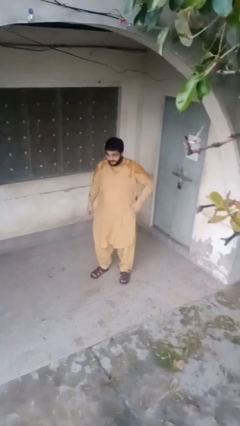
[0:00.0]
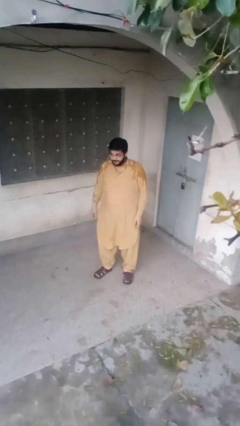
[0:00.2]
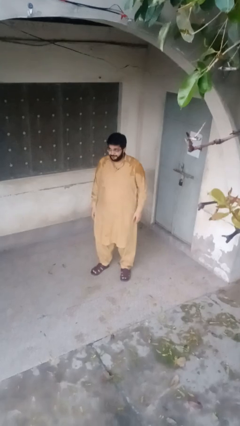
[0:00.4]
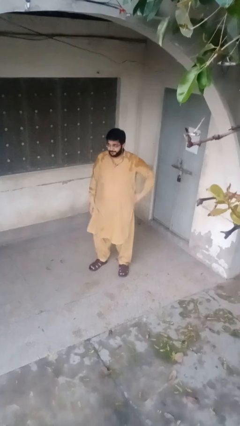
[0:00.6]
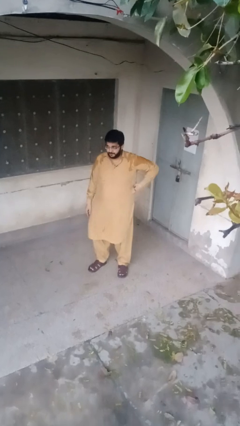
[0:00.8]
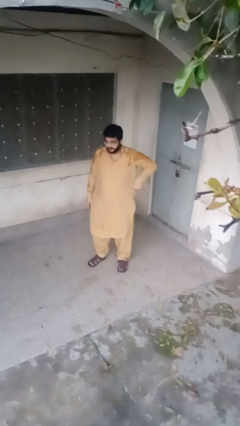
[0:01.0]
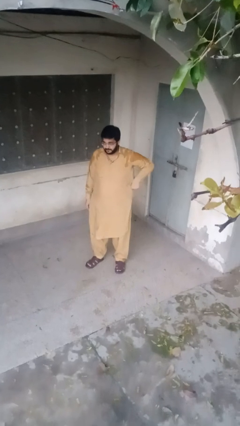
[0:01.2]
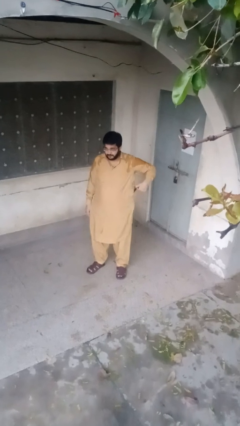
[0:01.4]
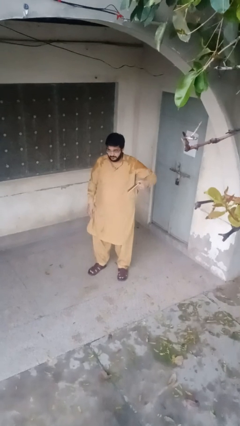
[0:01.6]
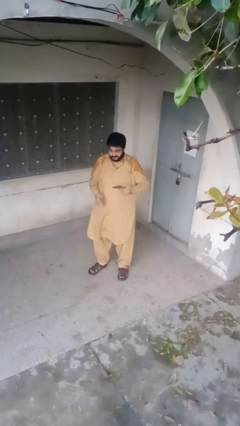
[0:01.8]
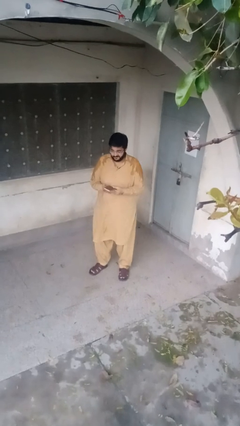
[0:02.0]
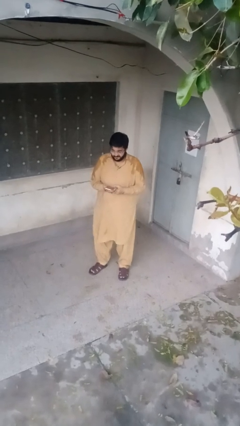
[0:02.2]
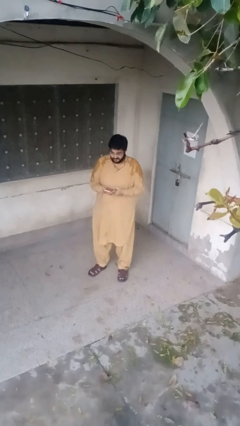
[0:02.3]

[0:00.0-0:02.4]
person takes phone from pocket

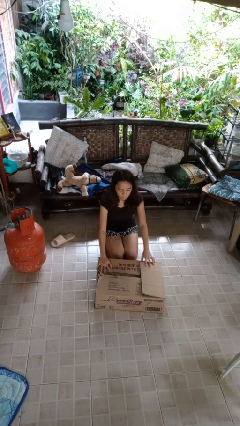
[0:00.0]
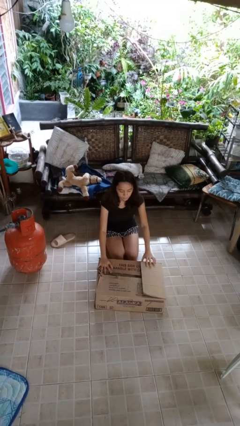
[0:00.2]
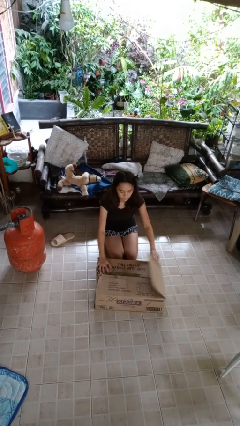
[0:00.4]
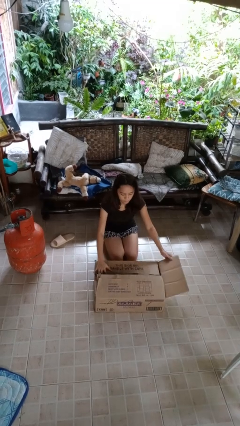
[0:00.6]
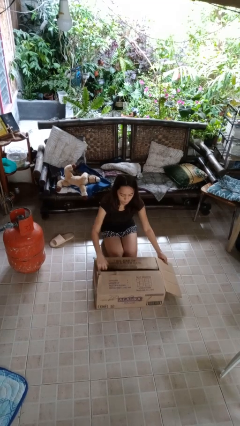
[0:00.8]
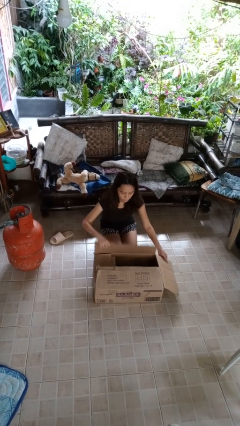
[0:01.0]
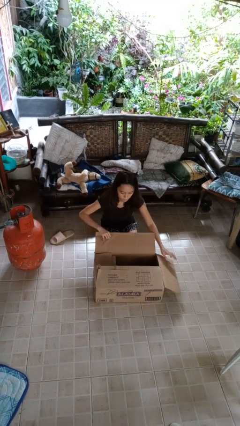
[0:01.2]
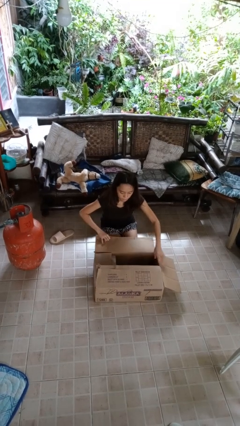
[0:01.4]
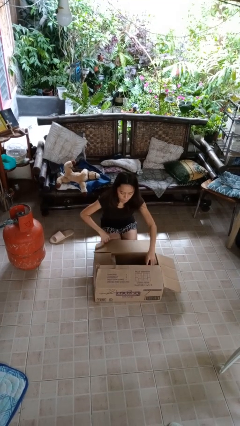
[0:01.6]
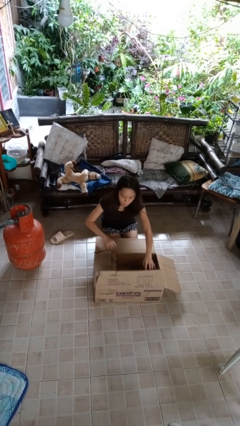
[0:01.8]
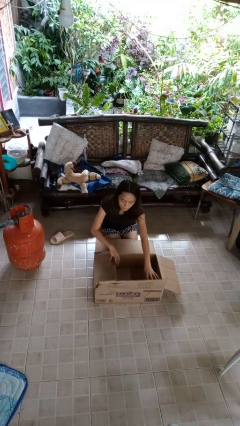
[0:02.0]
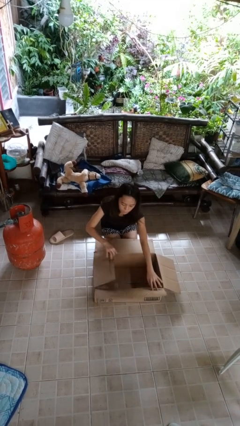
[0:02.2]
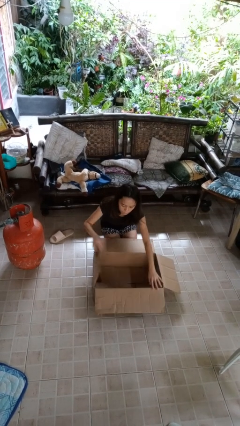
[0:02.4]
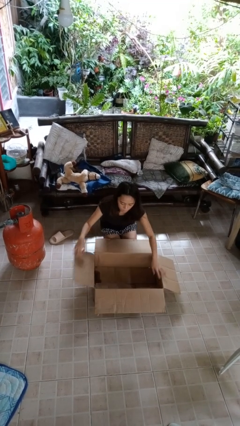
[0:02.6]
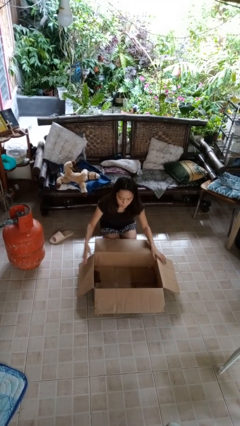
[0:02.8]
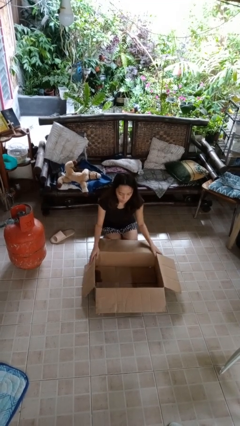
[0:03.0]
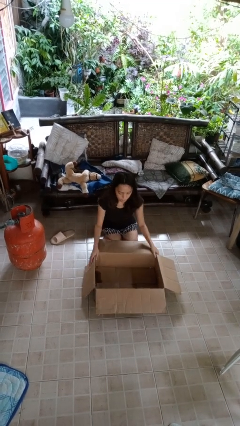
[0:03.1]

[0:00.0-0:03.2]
person opens box

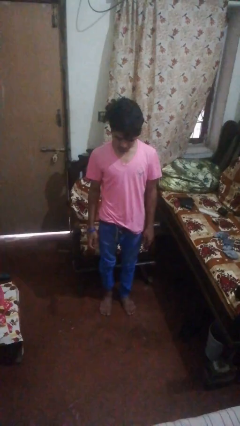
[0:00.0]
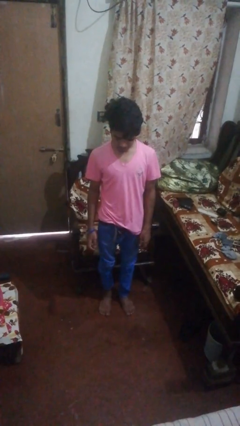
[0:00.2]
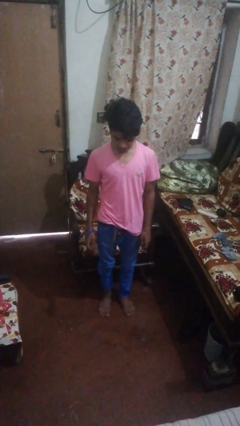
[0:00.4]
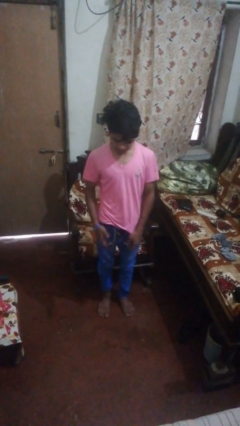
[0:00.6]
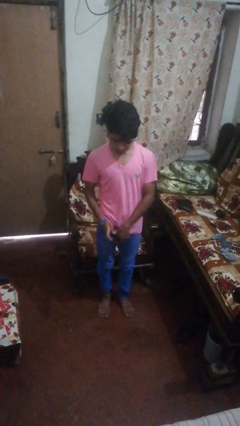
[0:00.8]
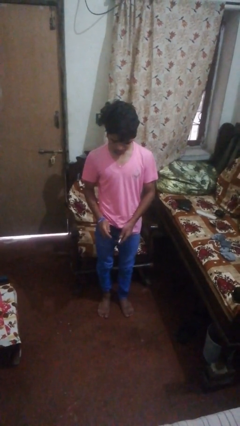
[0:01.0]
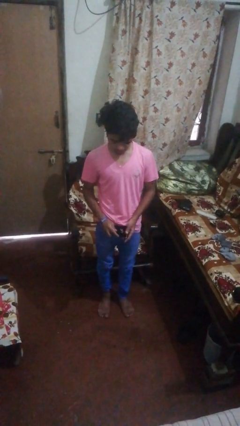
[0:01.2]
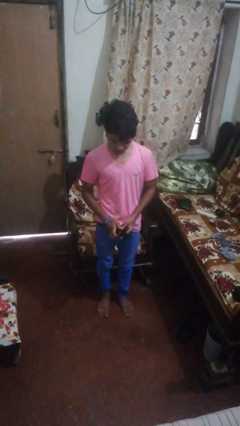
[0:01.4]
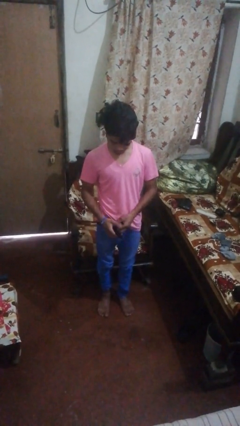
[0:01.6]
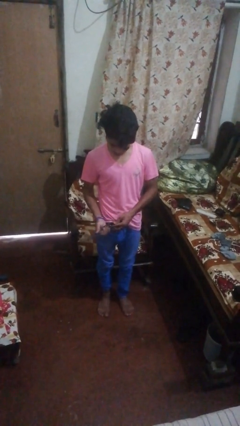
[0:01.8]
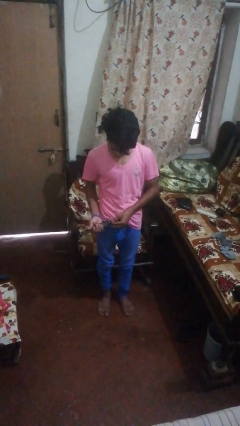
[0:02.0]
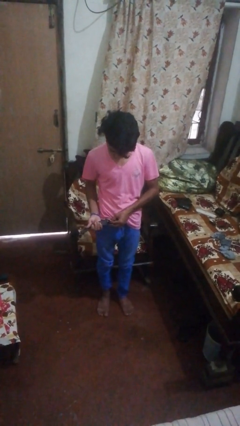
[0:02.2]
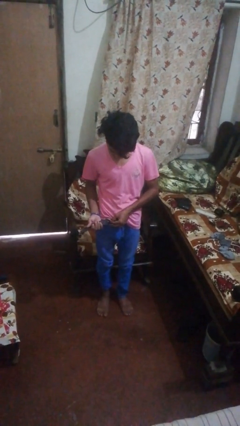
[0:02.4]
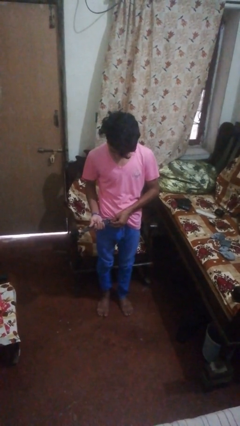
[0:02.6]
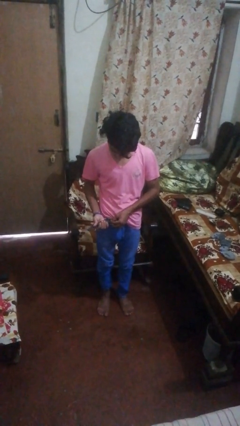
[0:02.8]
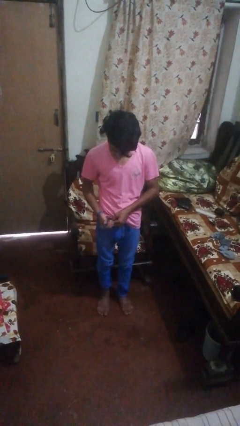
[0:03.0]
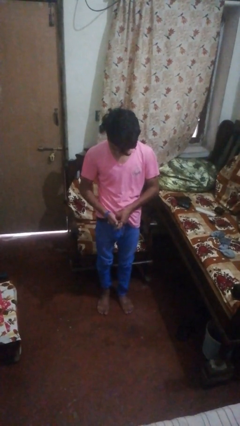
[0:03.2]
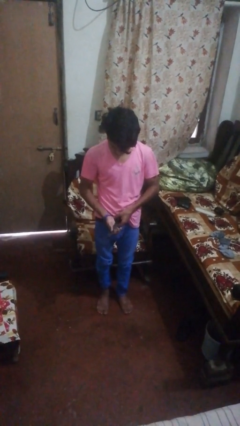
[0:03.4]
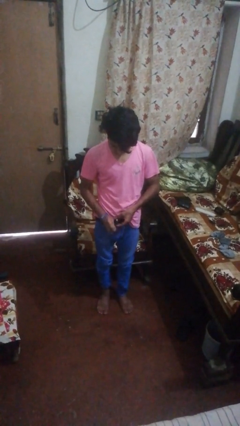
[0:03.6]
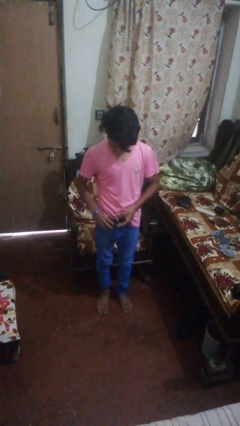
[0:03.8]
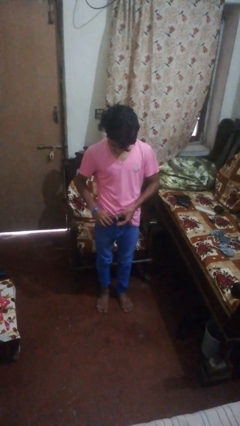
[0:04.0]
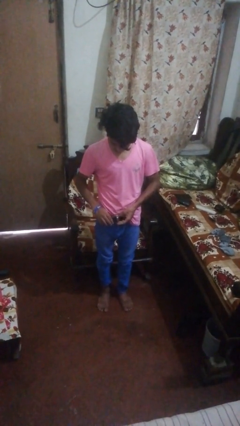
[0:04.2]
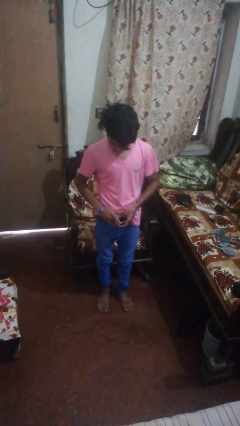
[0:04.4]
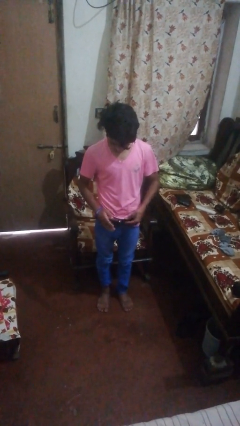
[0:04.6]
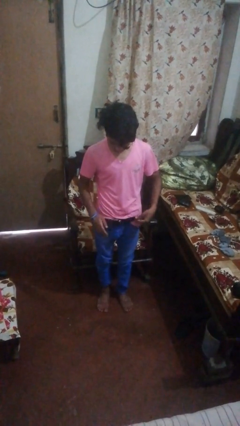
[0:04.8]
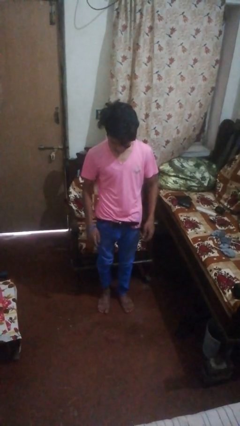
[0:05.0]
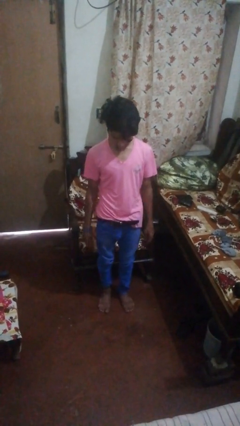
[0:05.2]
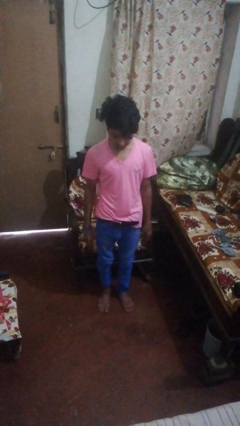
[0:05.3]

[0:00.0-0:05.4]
person puts on belt

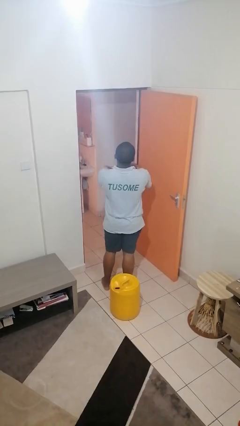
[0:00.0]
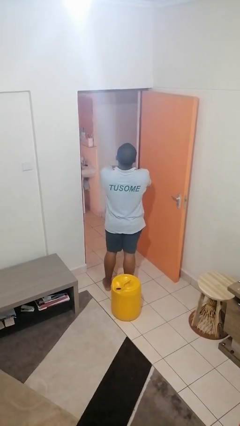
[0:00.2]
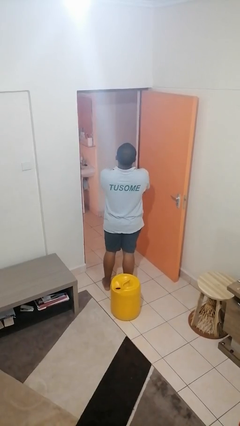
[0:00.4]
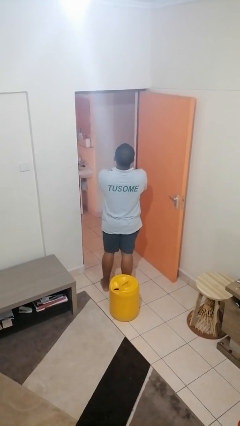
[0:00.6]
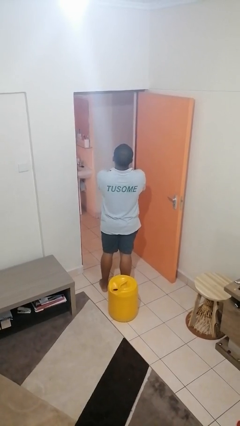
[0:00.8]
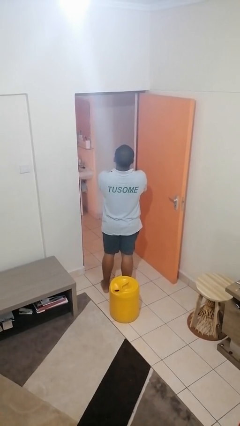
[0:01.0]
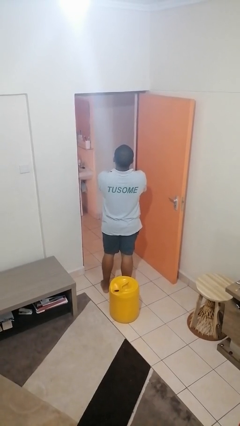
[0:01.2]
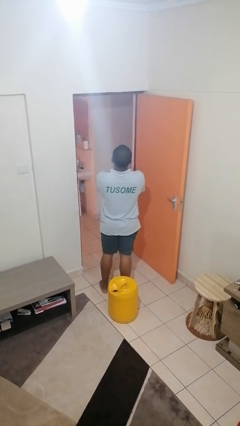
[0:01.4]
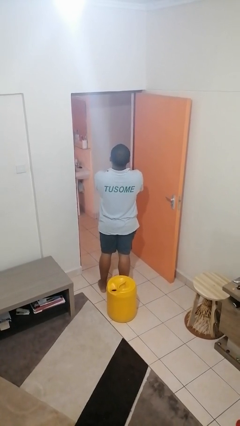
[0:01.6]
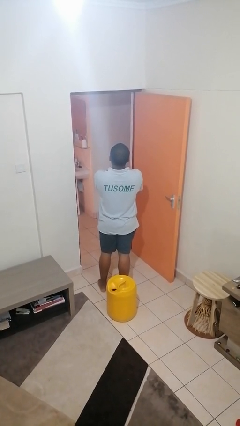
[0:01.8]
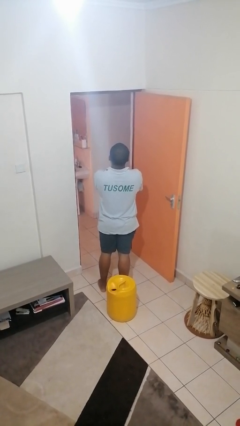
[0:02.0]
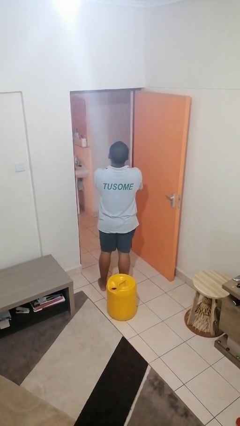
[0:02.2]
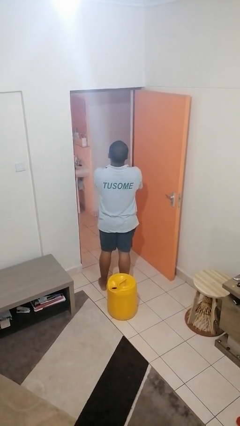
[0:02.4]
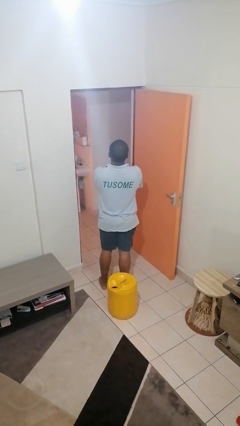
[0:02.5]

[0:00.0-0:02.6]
person crosses arms

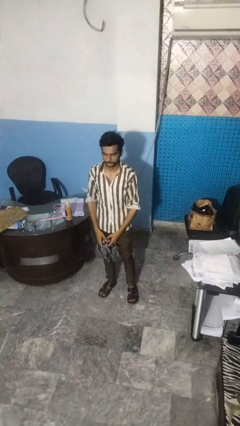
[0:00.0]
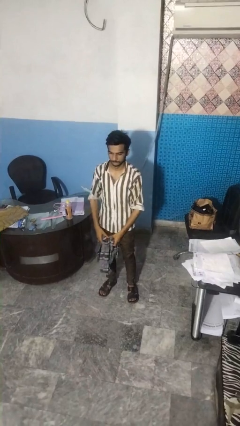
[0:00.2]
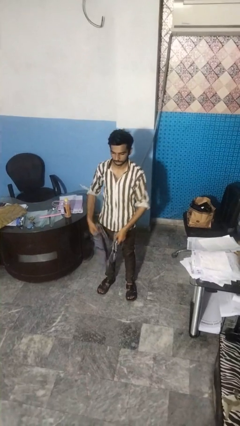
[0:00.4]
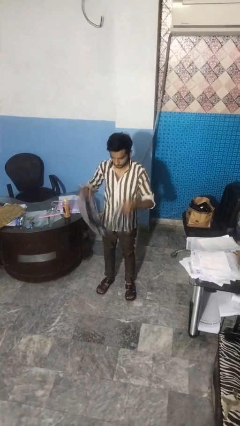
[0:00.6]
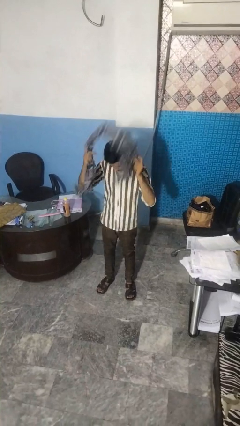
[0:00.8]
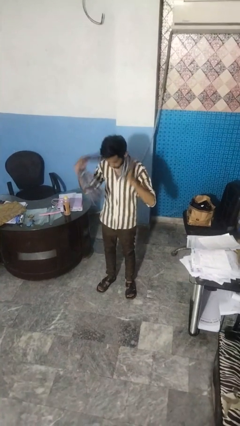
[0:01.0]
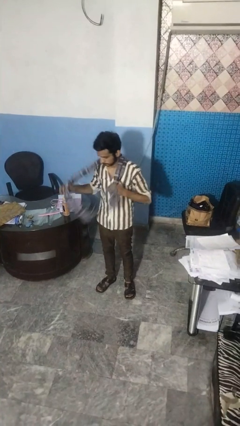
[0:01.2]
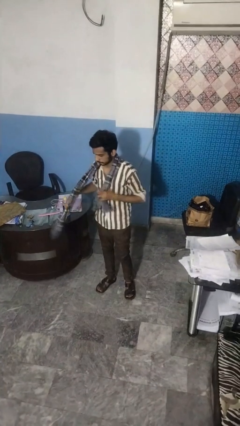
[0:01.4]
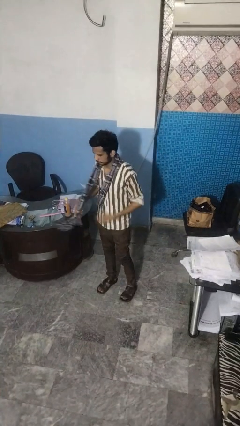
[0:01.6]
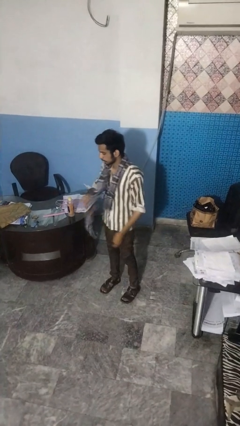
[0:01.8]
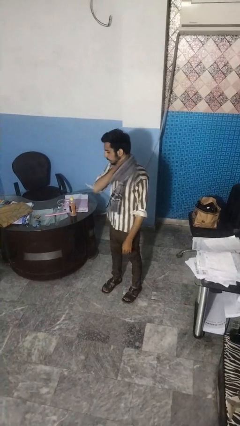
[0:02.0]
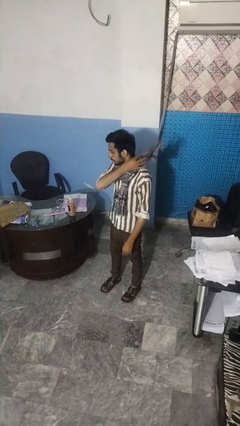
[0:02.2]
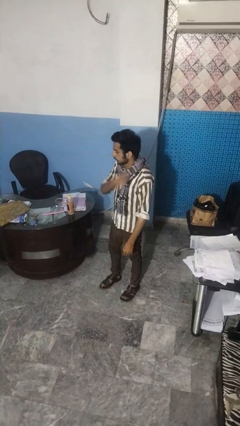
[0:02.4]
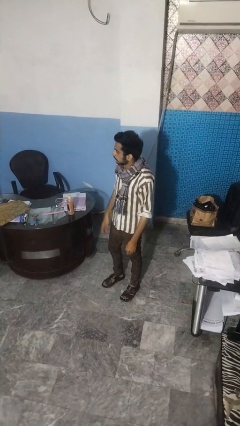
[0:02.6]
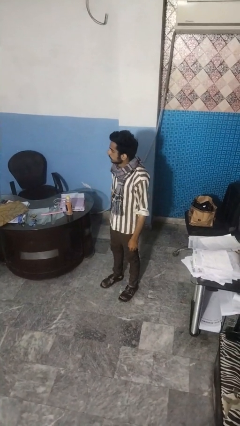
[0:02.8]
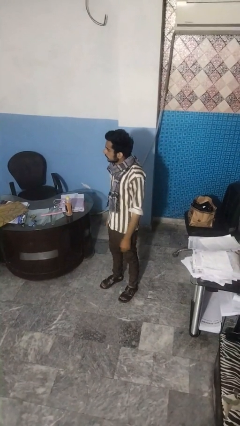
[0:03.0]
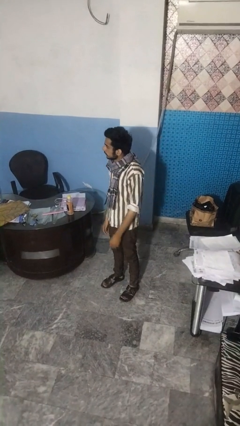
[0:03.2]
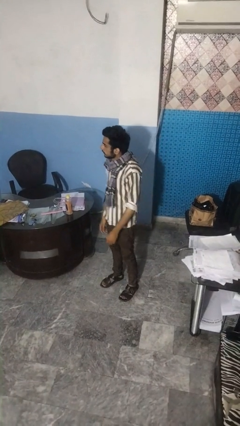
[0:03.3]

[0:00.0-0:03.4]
person puts on scarf

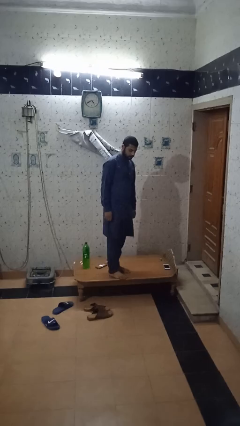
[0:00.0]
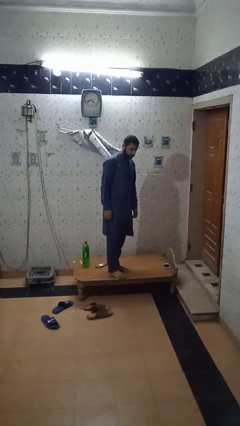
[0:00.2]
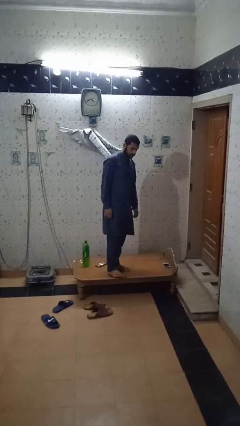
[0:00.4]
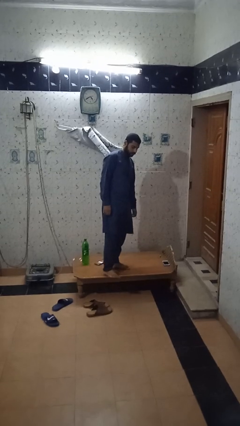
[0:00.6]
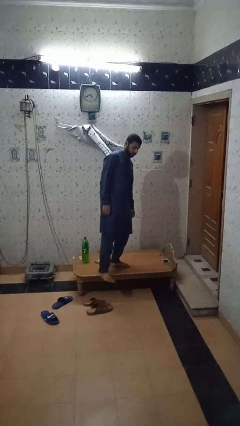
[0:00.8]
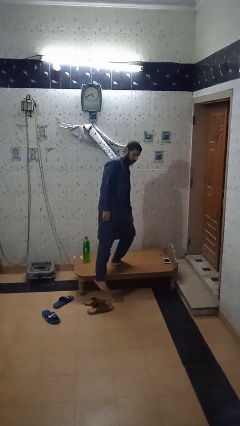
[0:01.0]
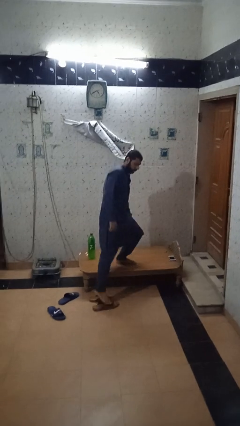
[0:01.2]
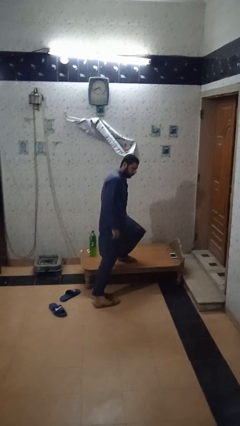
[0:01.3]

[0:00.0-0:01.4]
person climbs off table
